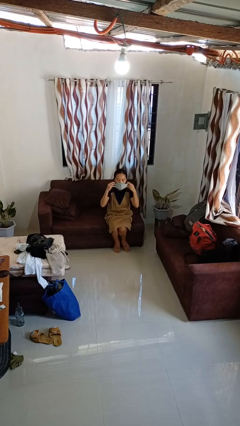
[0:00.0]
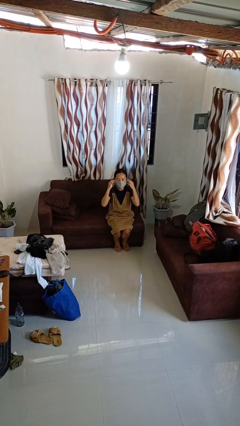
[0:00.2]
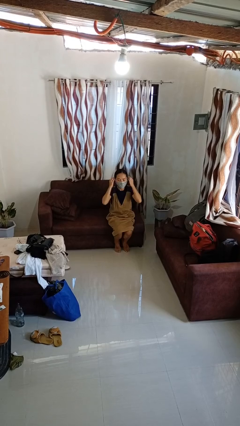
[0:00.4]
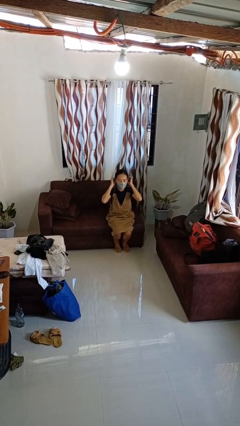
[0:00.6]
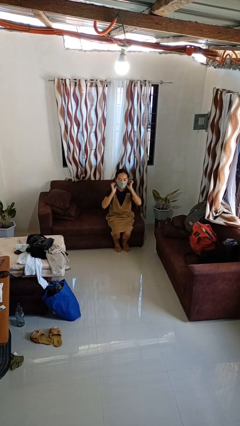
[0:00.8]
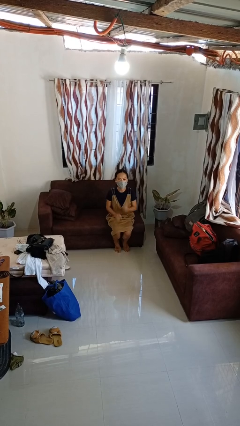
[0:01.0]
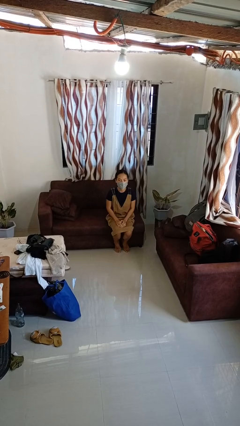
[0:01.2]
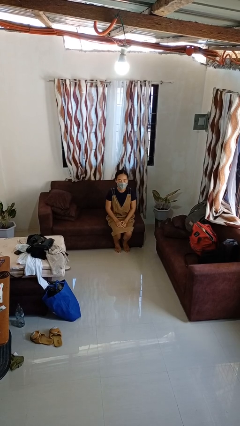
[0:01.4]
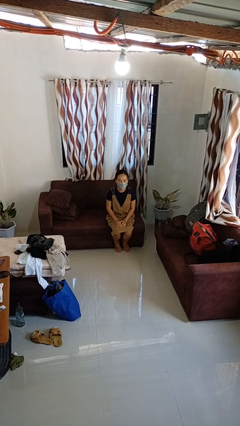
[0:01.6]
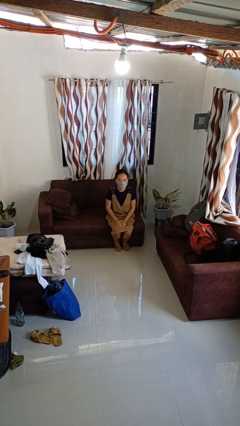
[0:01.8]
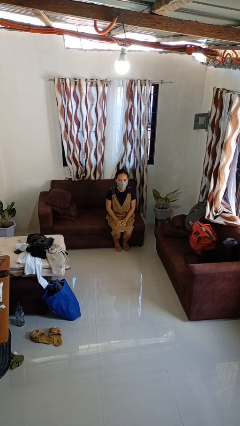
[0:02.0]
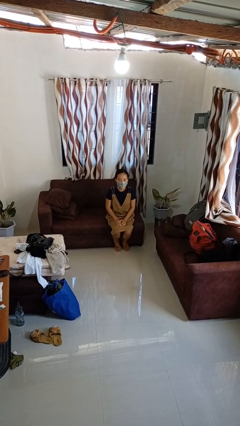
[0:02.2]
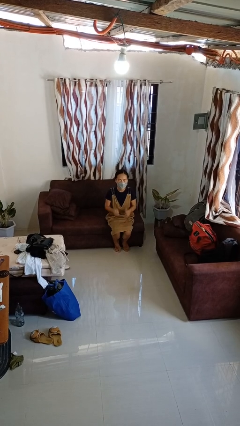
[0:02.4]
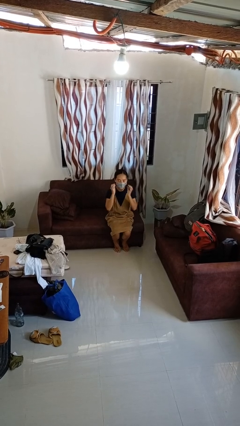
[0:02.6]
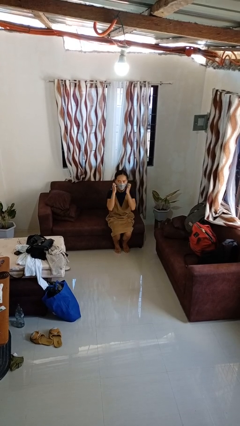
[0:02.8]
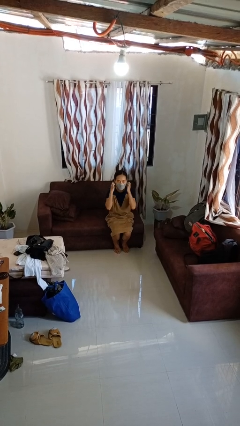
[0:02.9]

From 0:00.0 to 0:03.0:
person puts on facemask

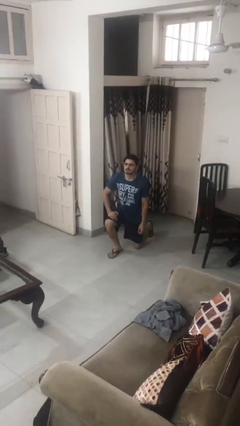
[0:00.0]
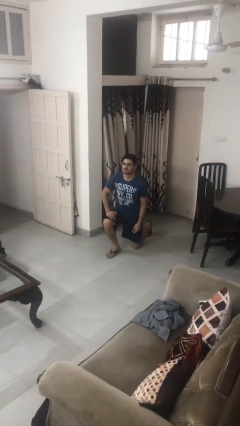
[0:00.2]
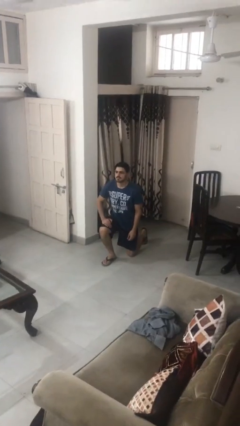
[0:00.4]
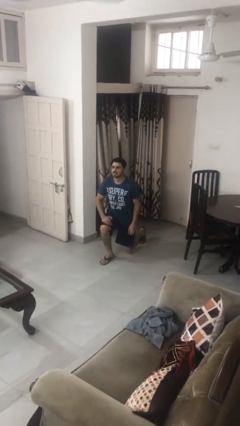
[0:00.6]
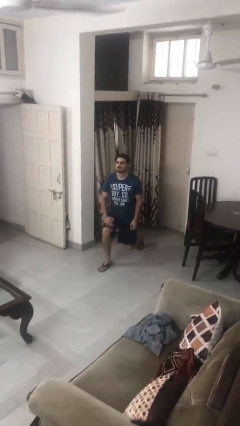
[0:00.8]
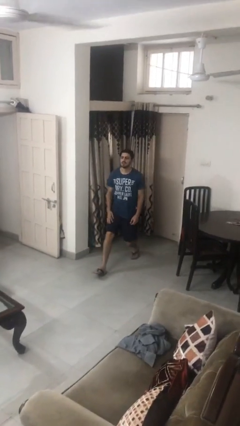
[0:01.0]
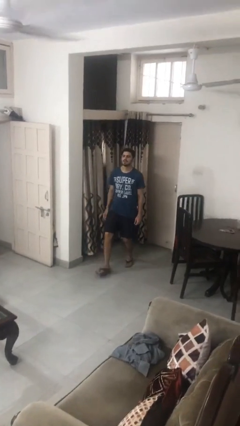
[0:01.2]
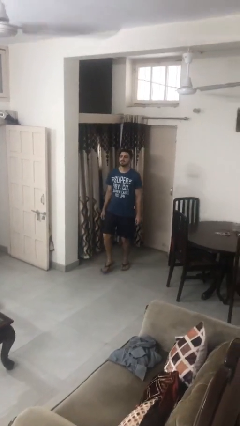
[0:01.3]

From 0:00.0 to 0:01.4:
person stands up from floor

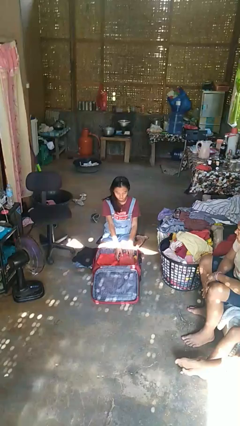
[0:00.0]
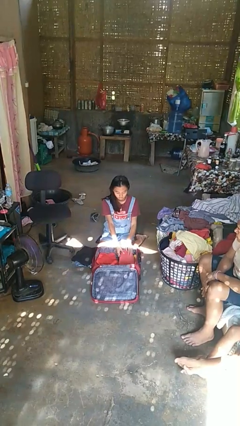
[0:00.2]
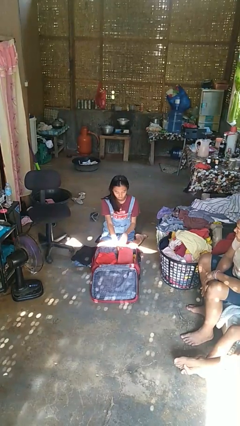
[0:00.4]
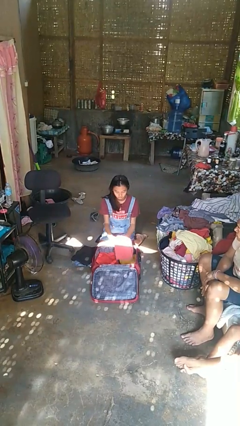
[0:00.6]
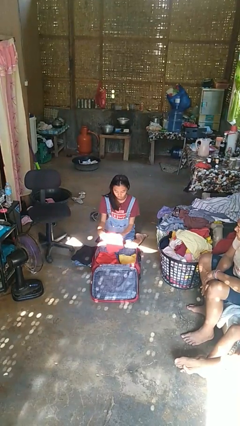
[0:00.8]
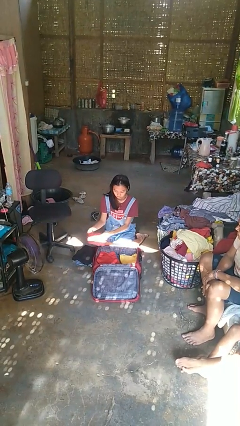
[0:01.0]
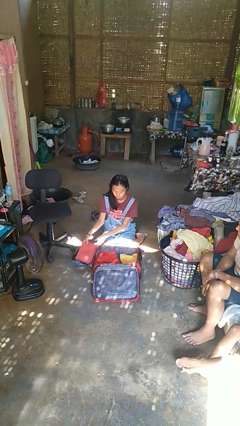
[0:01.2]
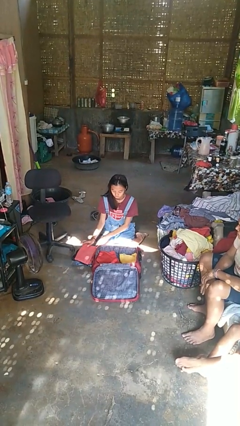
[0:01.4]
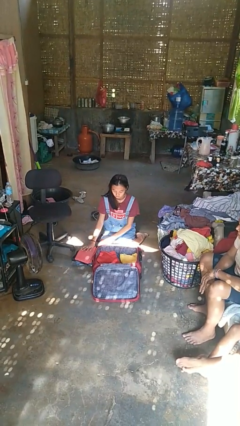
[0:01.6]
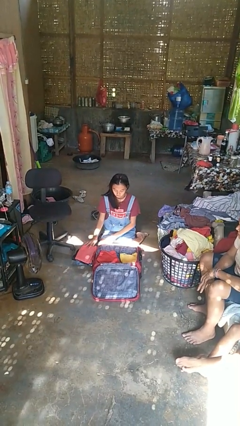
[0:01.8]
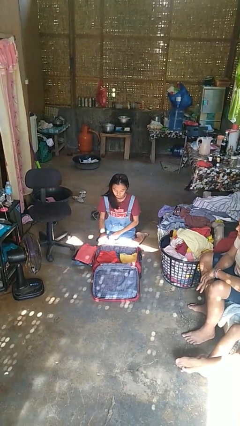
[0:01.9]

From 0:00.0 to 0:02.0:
person unloads clothes from suitcase

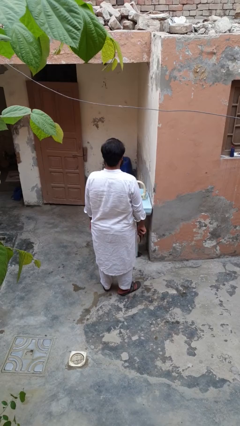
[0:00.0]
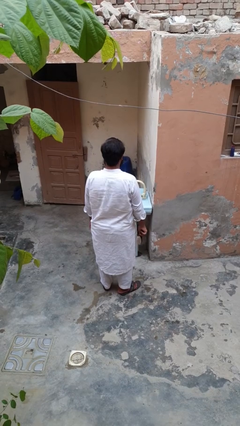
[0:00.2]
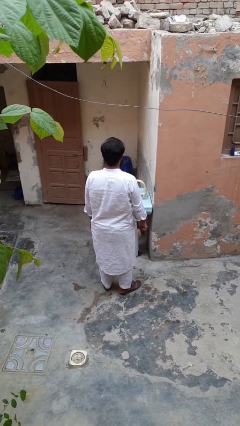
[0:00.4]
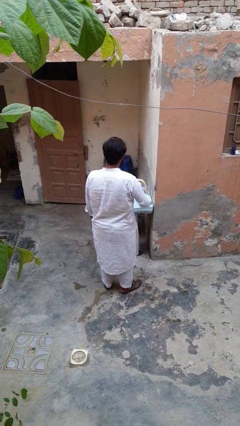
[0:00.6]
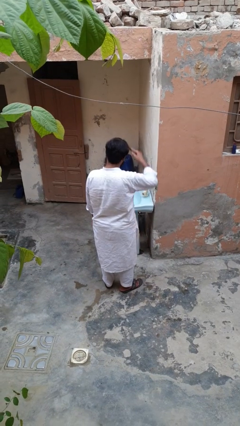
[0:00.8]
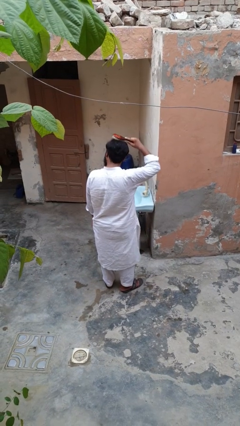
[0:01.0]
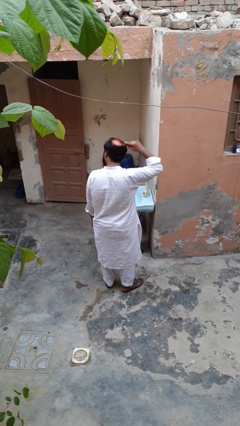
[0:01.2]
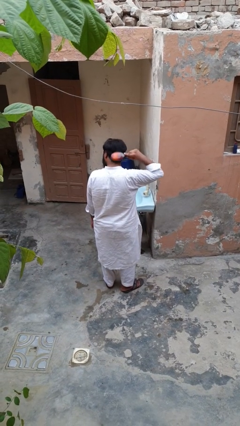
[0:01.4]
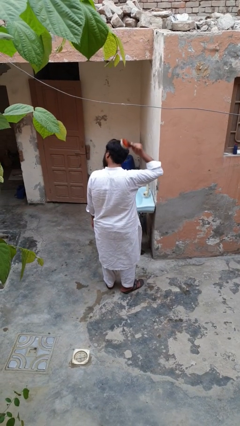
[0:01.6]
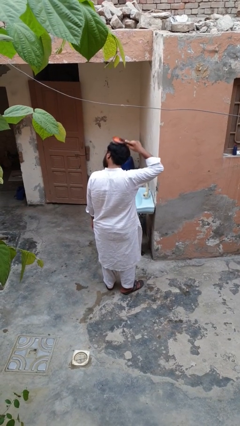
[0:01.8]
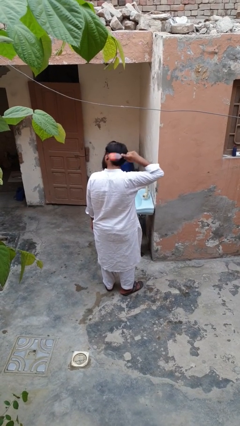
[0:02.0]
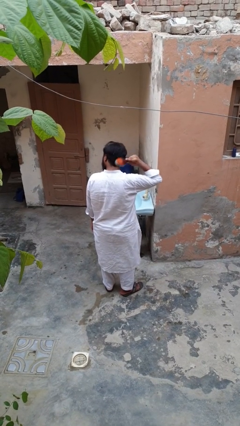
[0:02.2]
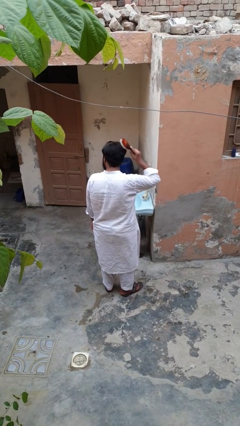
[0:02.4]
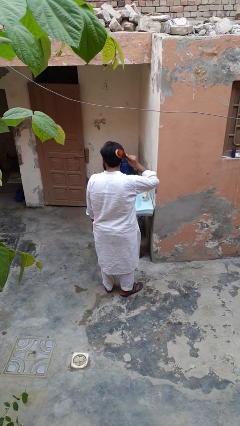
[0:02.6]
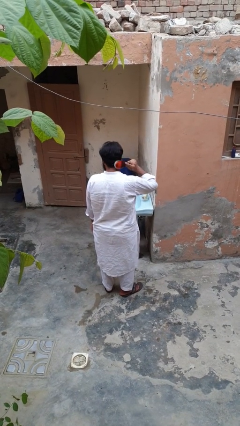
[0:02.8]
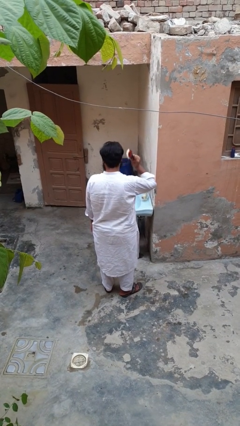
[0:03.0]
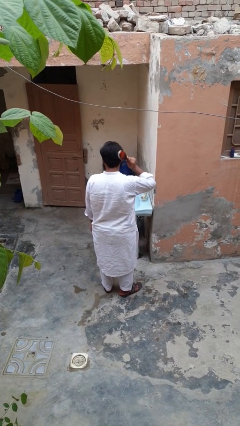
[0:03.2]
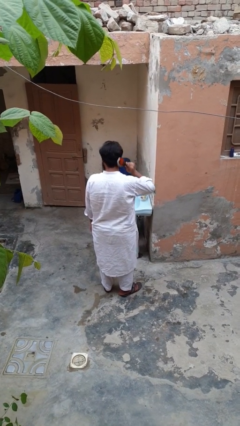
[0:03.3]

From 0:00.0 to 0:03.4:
person brushes hair

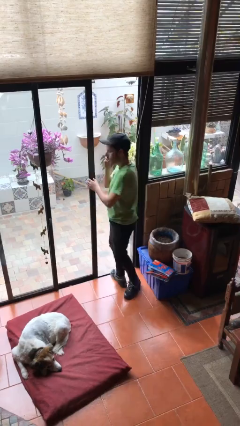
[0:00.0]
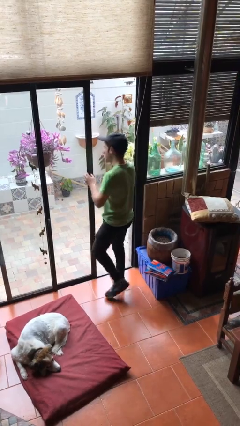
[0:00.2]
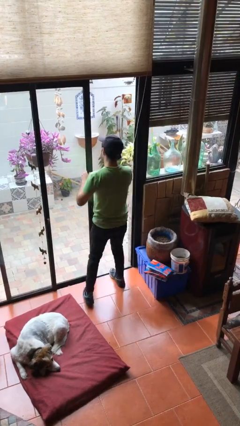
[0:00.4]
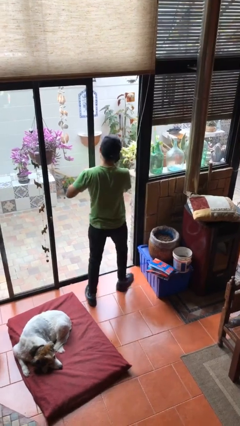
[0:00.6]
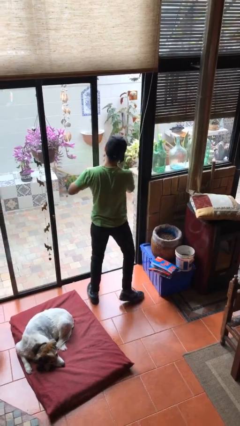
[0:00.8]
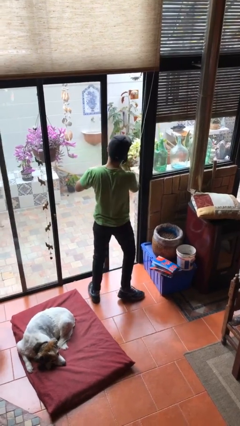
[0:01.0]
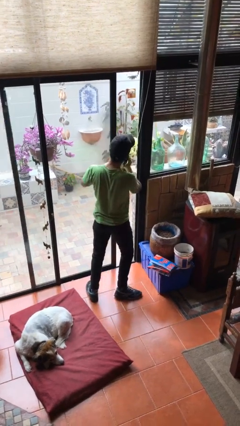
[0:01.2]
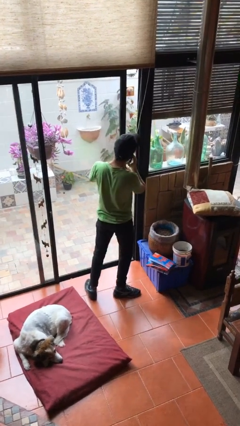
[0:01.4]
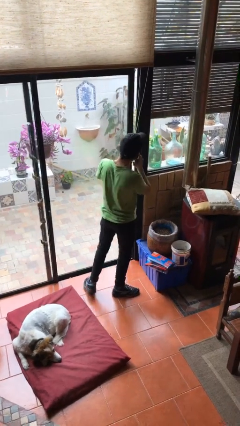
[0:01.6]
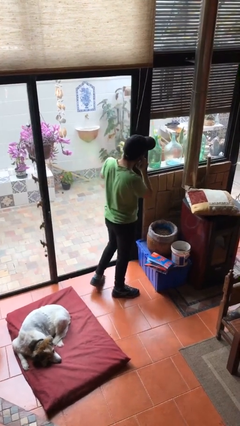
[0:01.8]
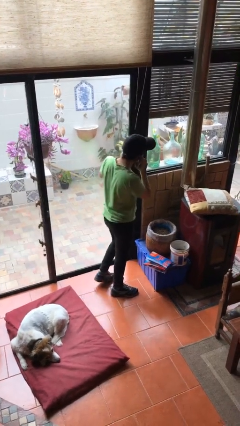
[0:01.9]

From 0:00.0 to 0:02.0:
person closes facility door

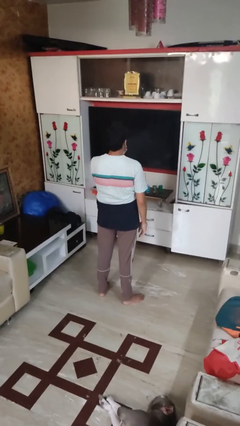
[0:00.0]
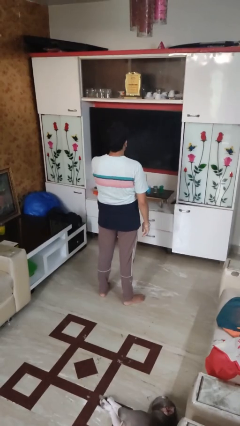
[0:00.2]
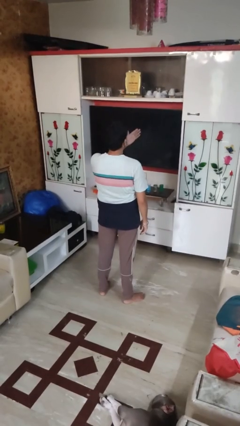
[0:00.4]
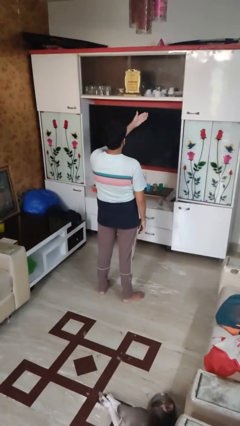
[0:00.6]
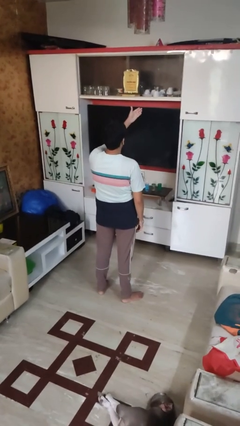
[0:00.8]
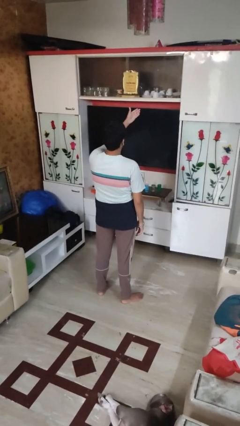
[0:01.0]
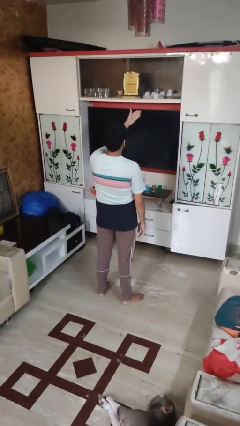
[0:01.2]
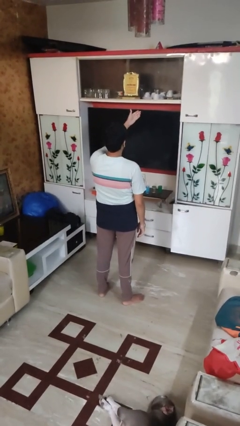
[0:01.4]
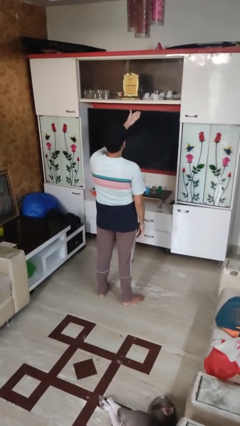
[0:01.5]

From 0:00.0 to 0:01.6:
person gestures blow kiss

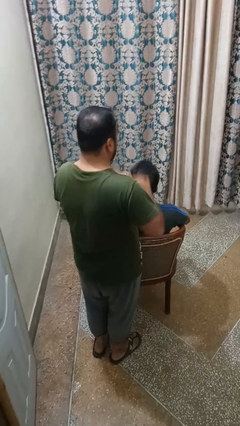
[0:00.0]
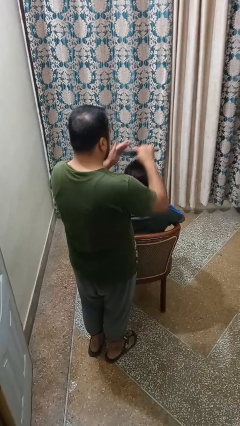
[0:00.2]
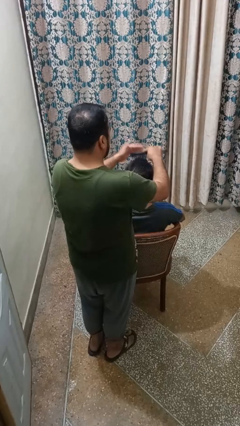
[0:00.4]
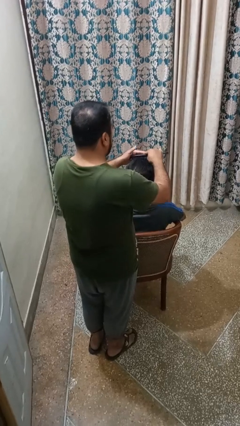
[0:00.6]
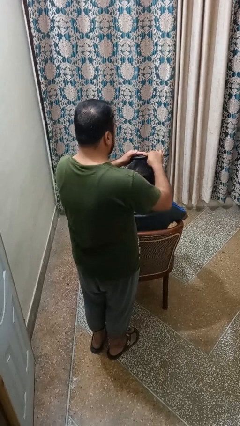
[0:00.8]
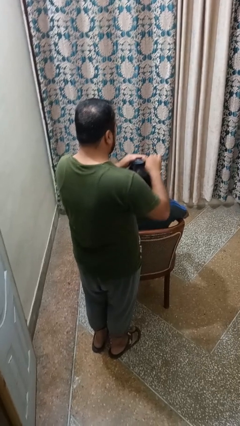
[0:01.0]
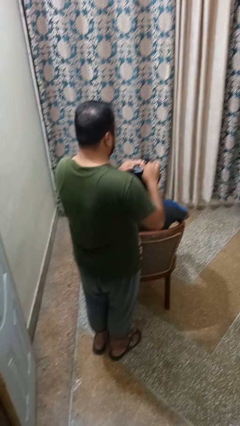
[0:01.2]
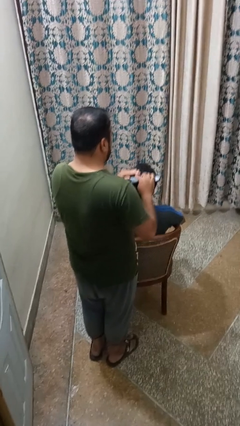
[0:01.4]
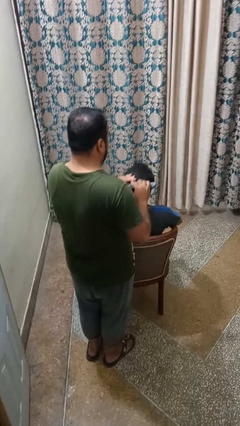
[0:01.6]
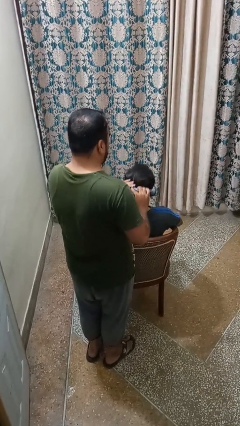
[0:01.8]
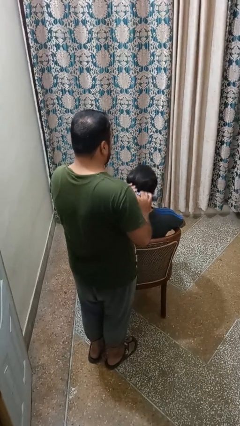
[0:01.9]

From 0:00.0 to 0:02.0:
person brushes hair of person

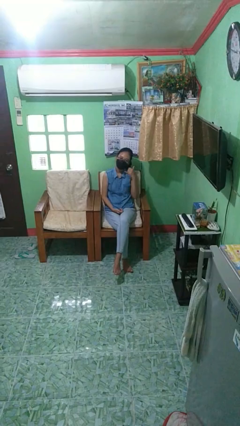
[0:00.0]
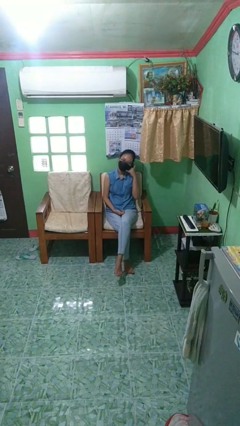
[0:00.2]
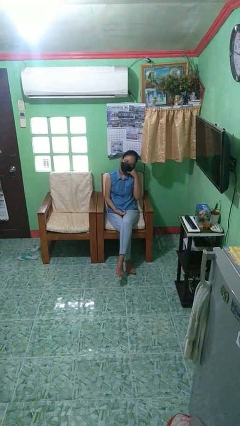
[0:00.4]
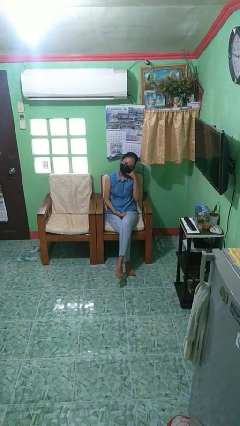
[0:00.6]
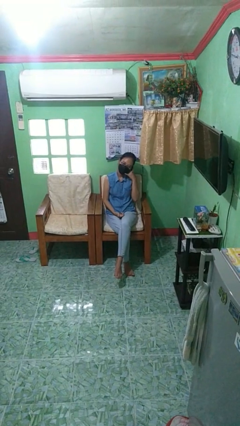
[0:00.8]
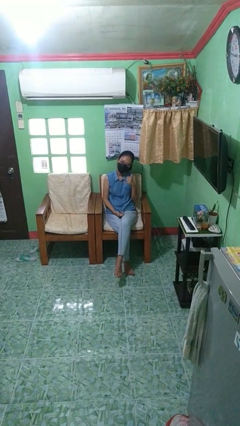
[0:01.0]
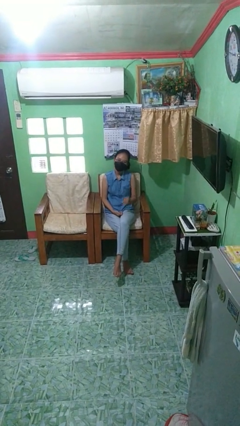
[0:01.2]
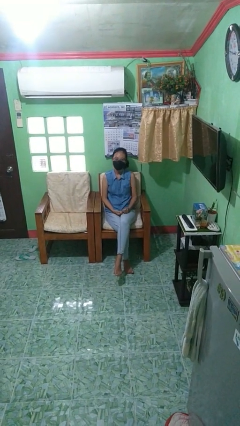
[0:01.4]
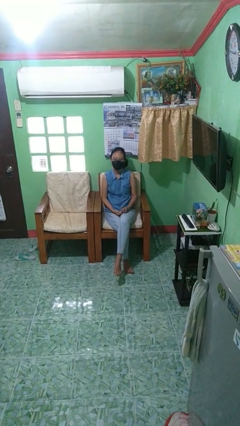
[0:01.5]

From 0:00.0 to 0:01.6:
person gestures call me
